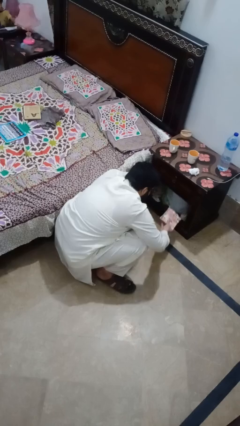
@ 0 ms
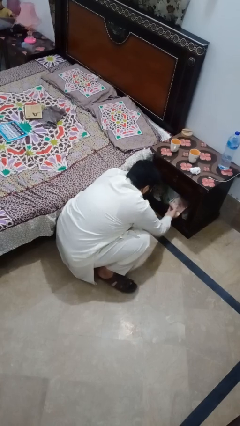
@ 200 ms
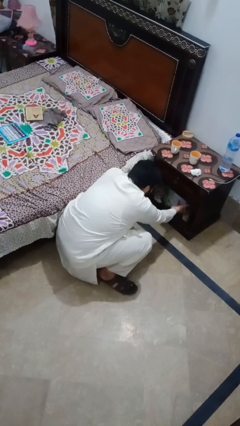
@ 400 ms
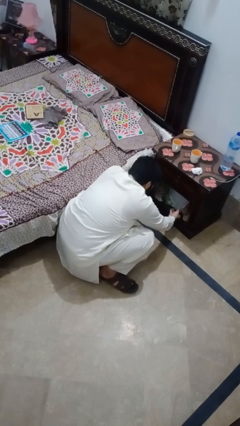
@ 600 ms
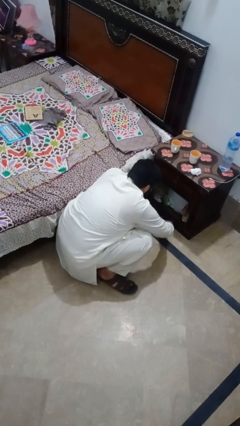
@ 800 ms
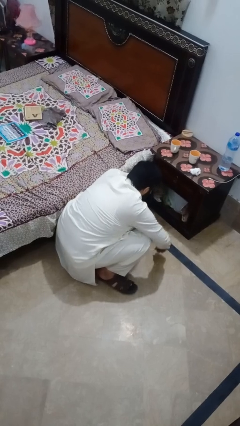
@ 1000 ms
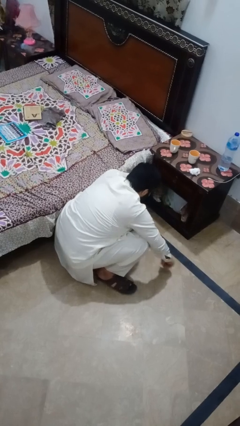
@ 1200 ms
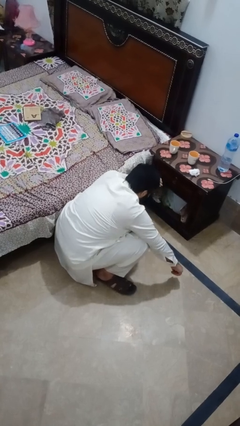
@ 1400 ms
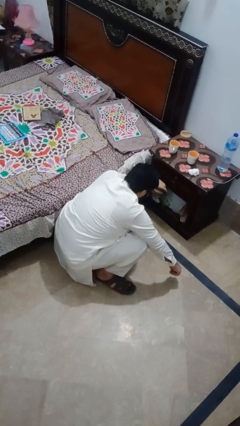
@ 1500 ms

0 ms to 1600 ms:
person puts down object into cabinet

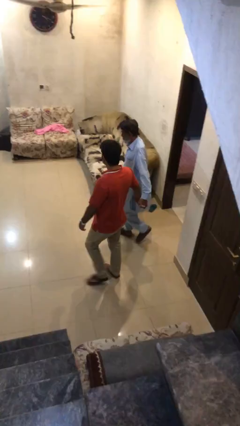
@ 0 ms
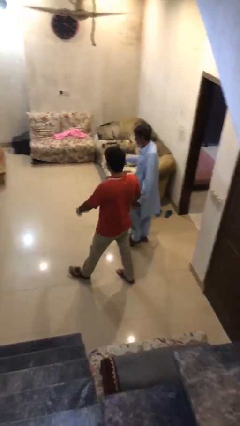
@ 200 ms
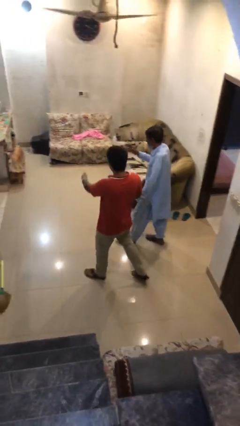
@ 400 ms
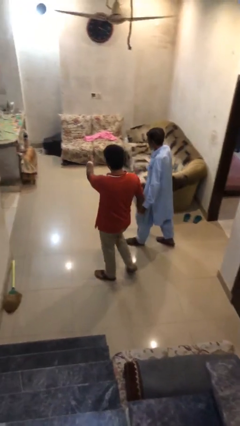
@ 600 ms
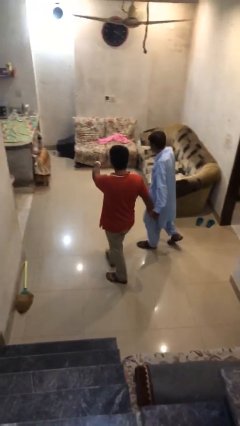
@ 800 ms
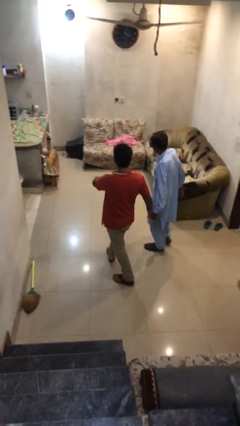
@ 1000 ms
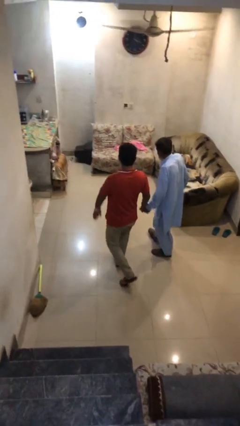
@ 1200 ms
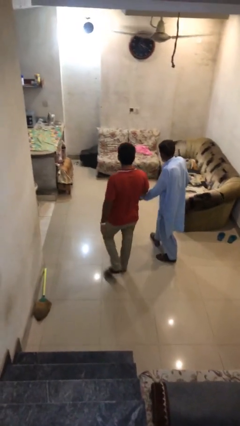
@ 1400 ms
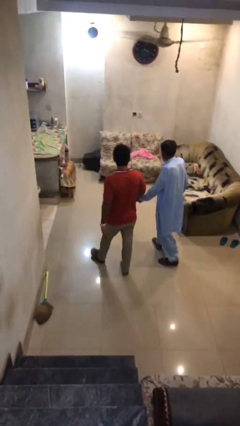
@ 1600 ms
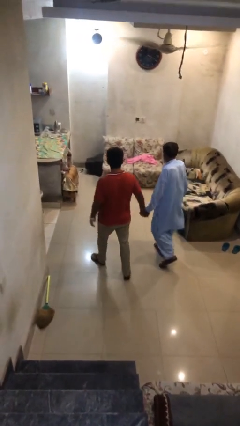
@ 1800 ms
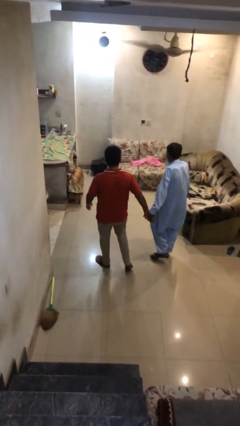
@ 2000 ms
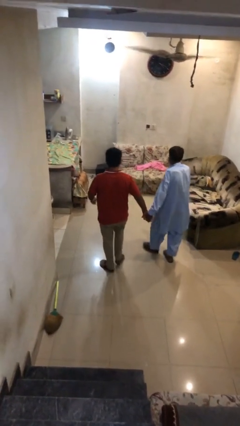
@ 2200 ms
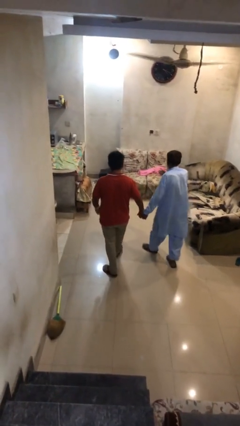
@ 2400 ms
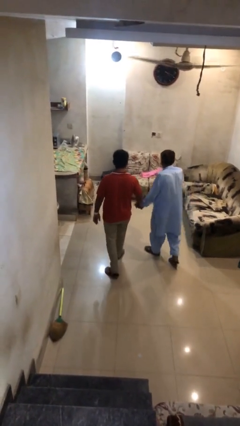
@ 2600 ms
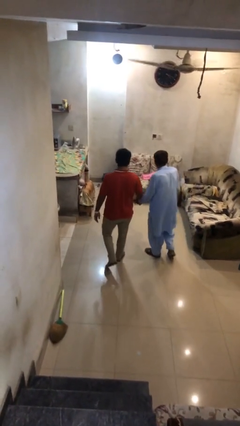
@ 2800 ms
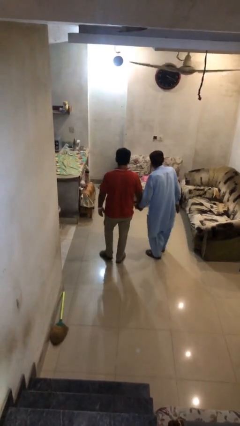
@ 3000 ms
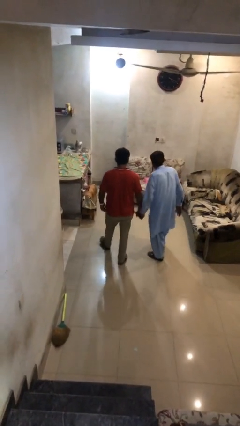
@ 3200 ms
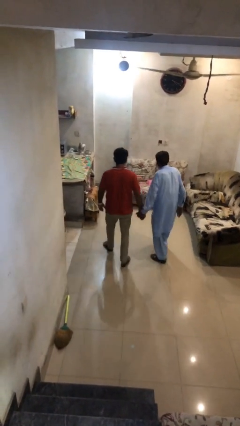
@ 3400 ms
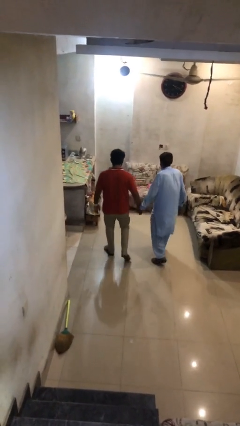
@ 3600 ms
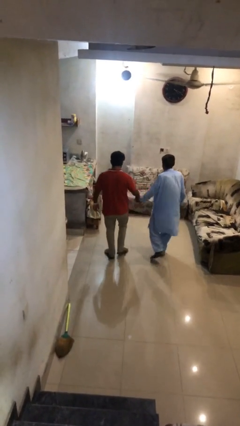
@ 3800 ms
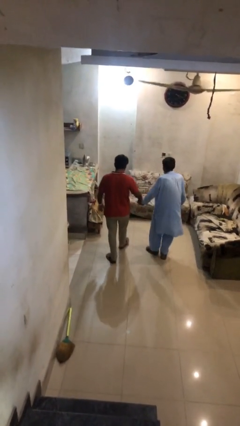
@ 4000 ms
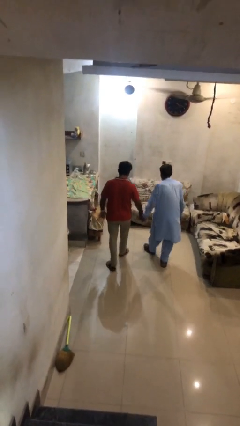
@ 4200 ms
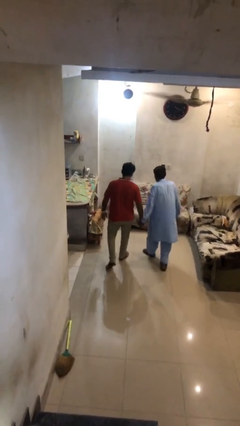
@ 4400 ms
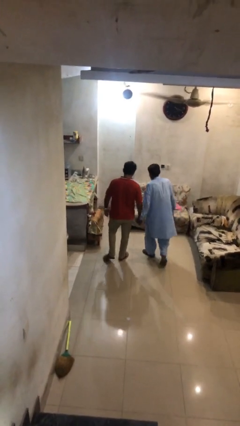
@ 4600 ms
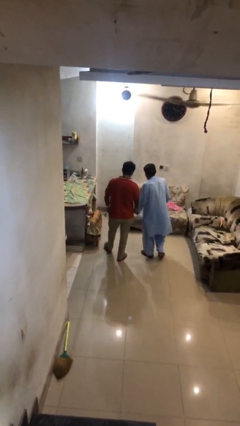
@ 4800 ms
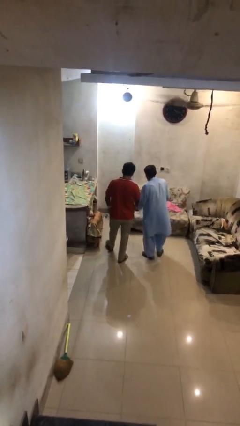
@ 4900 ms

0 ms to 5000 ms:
person holds hand

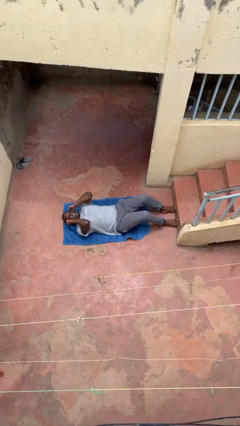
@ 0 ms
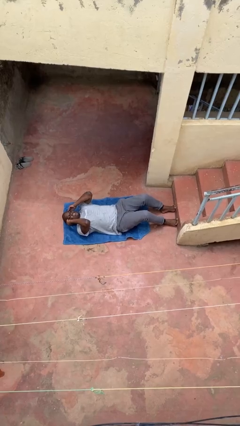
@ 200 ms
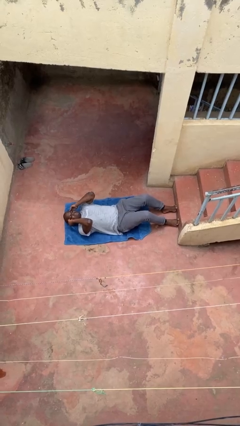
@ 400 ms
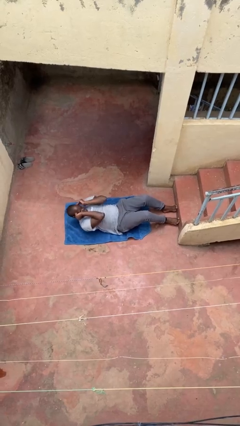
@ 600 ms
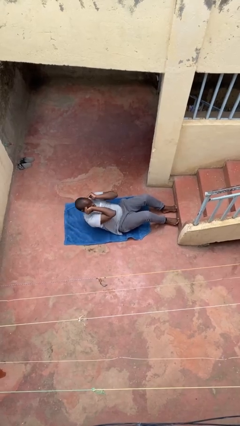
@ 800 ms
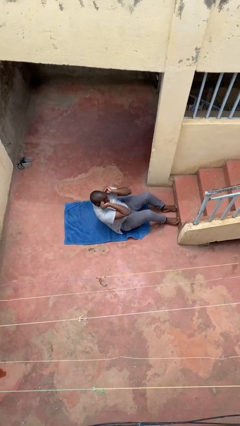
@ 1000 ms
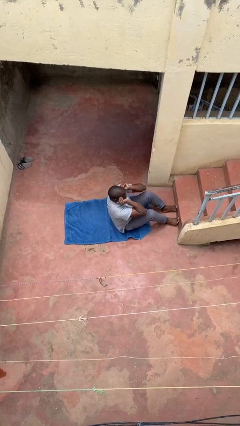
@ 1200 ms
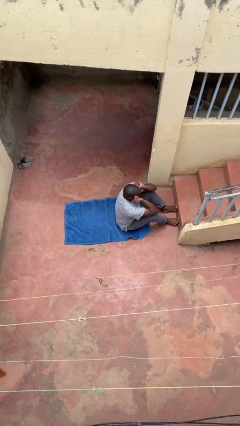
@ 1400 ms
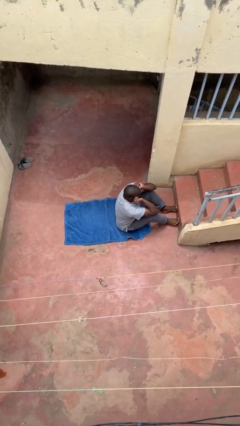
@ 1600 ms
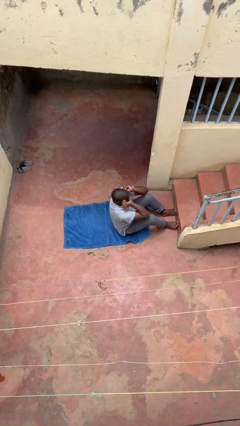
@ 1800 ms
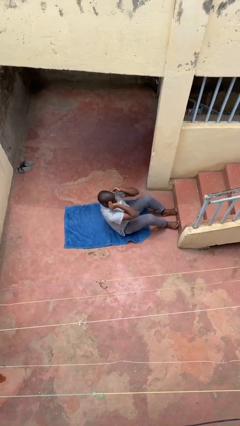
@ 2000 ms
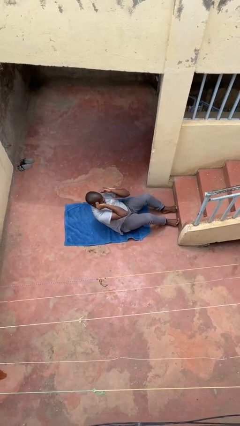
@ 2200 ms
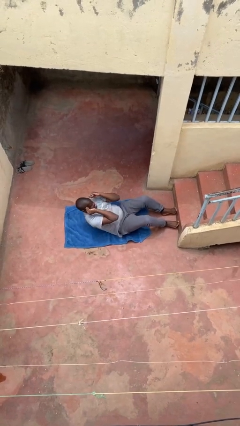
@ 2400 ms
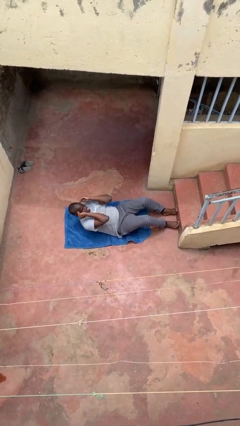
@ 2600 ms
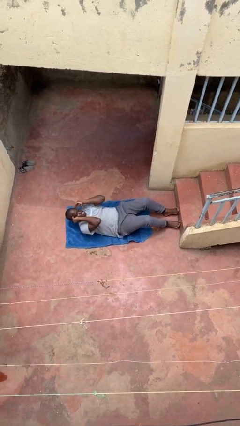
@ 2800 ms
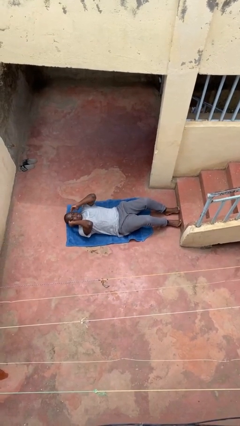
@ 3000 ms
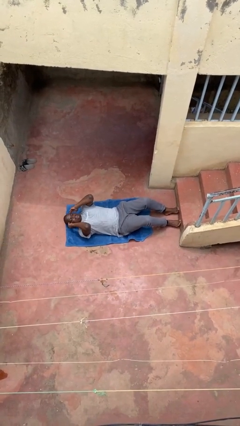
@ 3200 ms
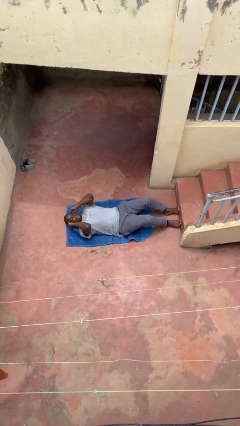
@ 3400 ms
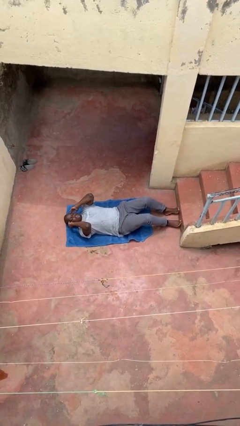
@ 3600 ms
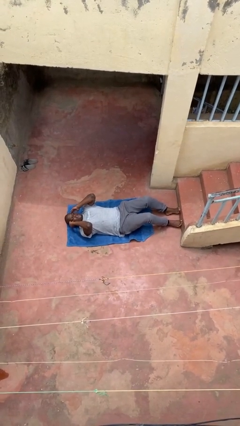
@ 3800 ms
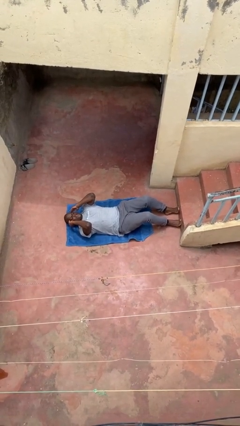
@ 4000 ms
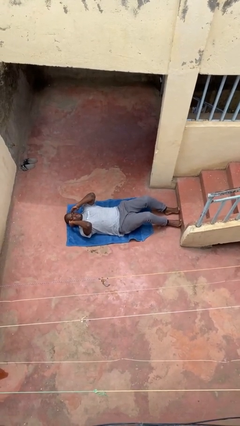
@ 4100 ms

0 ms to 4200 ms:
person exercises with situp

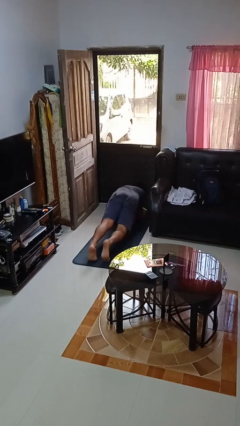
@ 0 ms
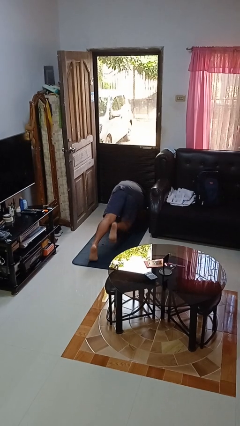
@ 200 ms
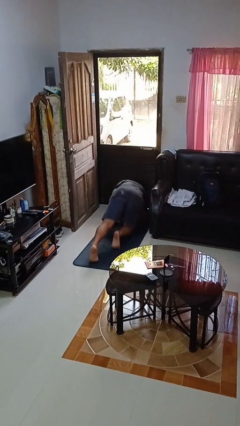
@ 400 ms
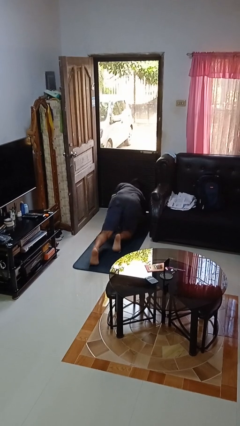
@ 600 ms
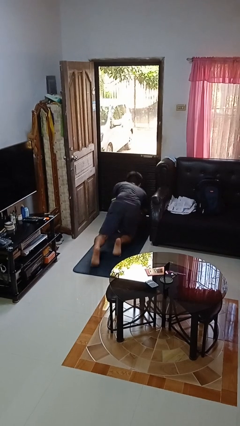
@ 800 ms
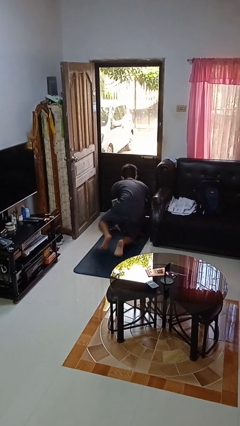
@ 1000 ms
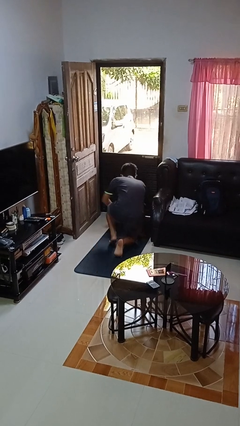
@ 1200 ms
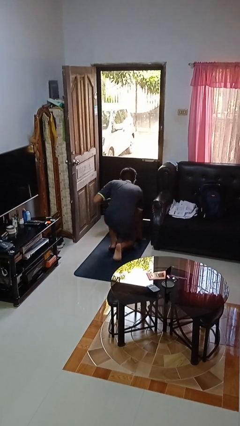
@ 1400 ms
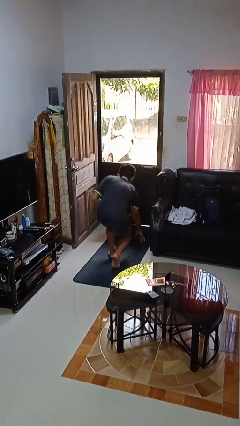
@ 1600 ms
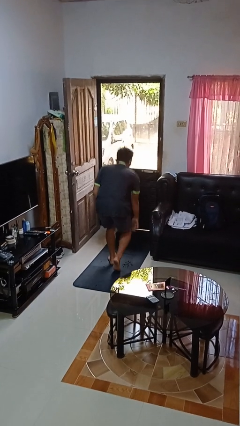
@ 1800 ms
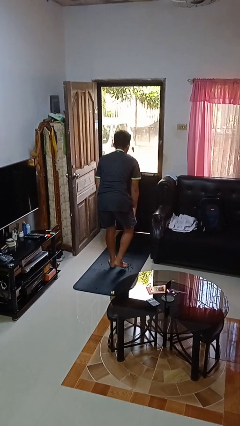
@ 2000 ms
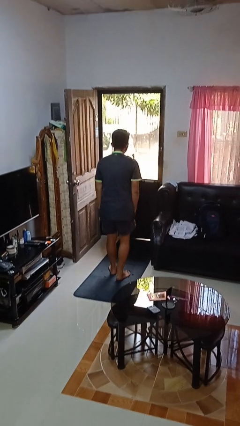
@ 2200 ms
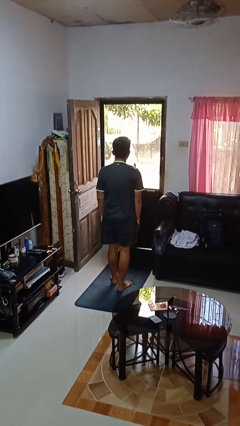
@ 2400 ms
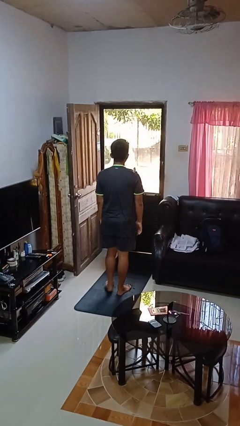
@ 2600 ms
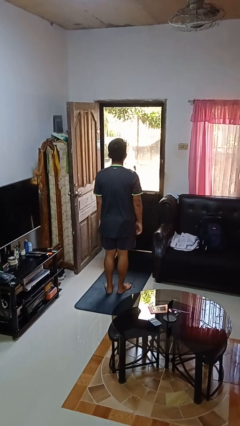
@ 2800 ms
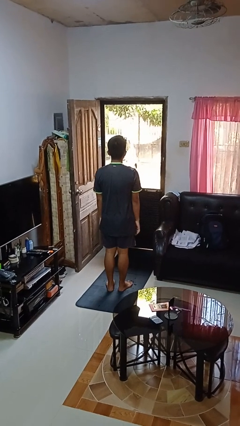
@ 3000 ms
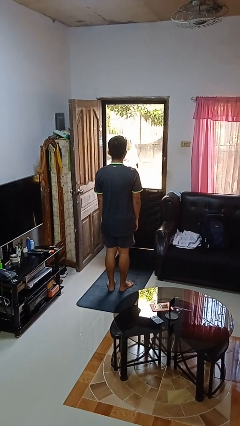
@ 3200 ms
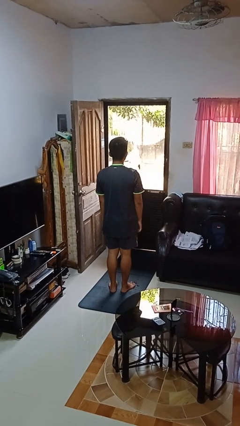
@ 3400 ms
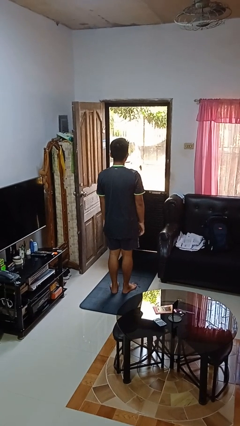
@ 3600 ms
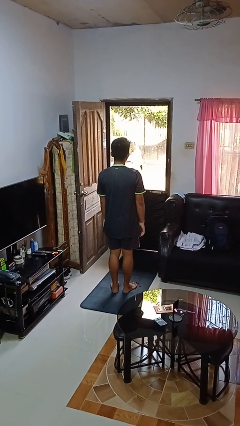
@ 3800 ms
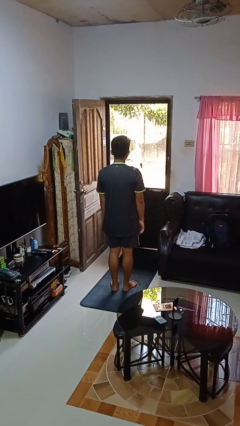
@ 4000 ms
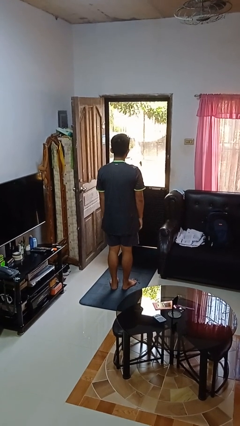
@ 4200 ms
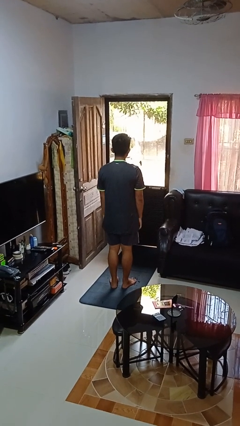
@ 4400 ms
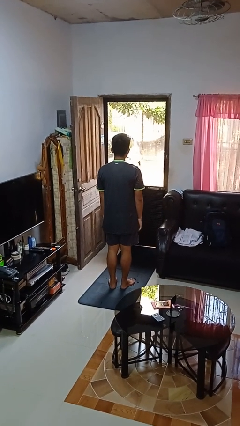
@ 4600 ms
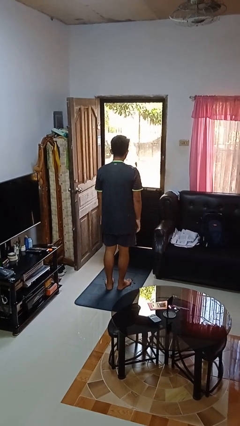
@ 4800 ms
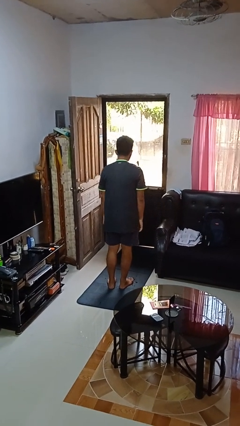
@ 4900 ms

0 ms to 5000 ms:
person stands up from floor

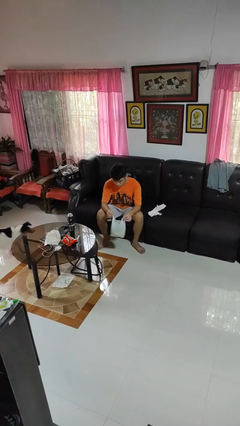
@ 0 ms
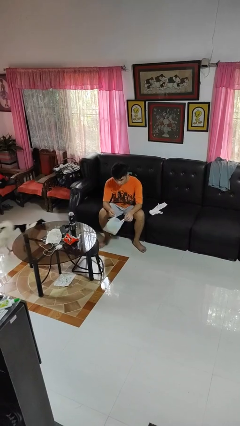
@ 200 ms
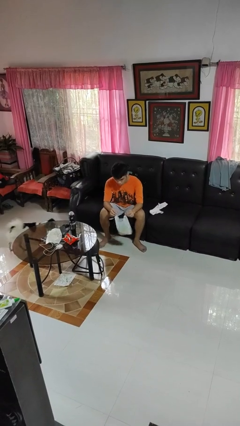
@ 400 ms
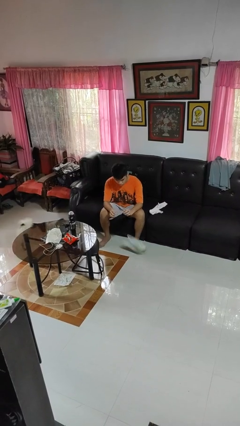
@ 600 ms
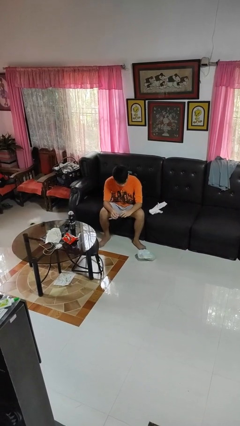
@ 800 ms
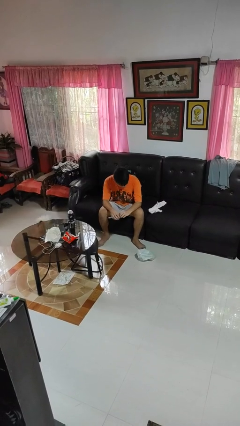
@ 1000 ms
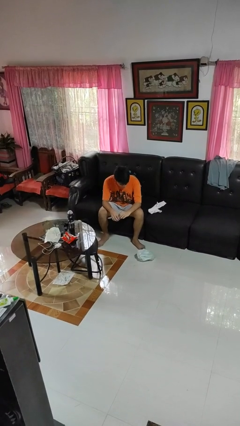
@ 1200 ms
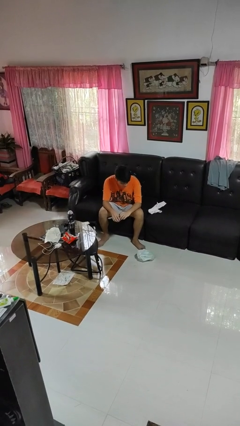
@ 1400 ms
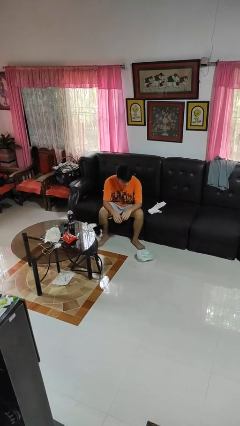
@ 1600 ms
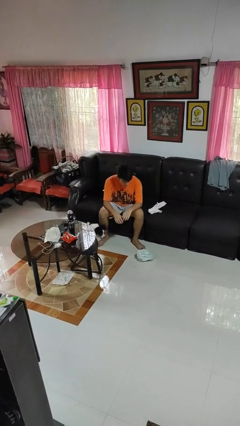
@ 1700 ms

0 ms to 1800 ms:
person drops object
